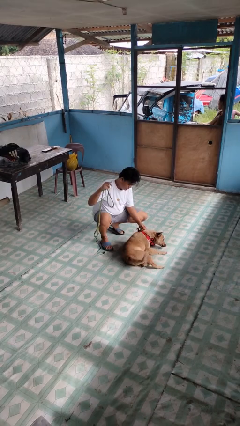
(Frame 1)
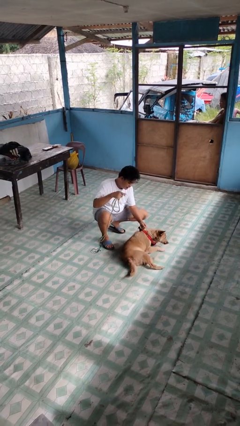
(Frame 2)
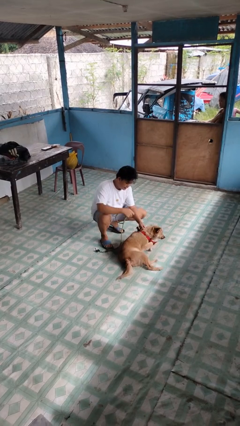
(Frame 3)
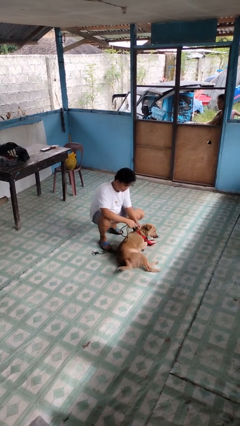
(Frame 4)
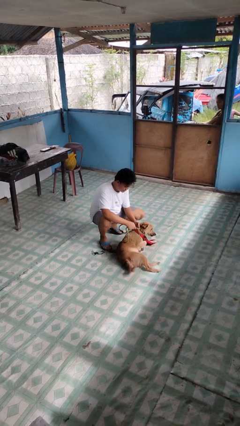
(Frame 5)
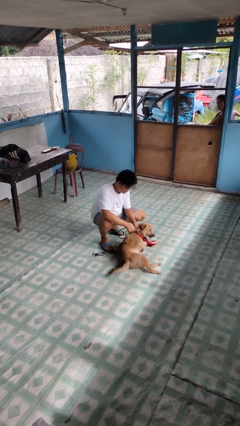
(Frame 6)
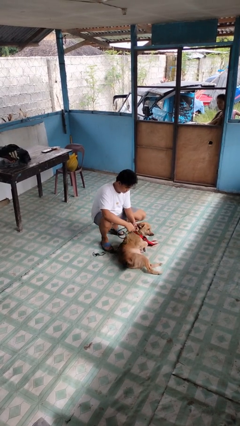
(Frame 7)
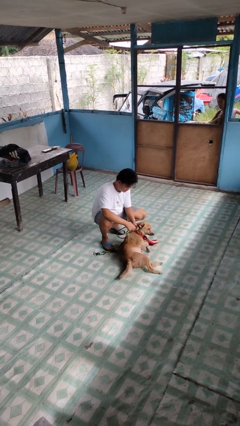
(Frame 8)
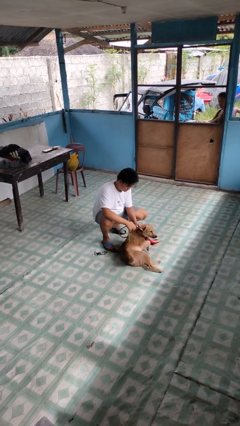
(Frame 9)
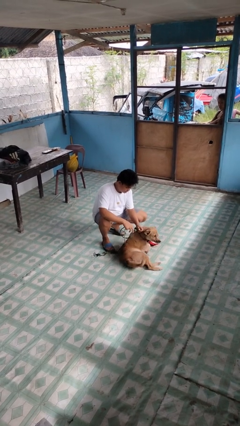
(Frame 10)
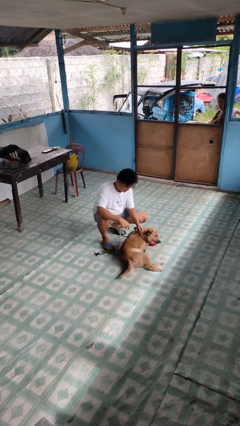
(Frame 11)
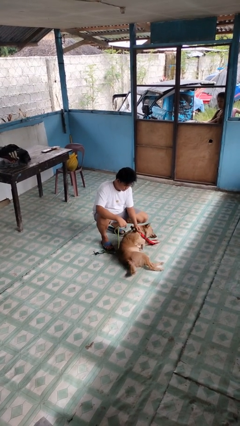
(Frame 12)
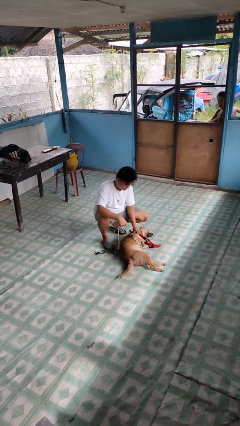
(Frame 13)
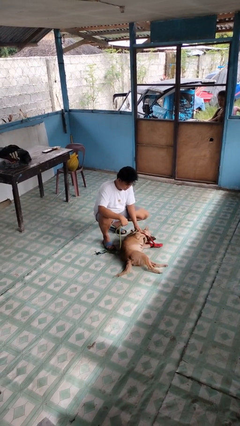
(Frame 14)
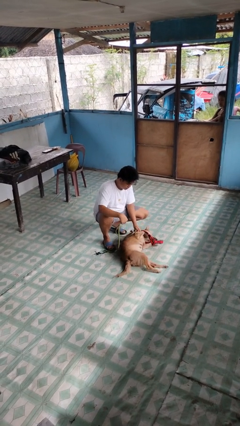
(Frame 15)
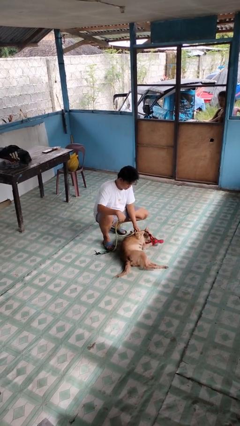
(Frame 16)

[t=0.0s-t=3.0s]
person attaches leash to dog

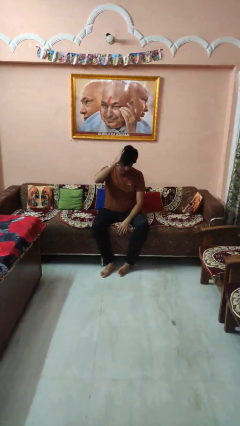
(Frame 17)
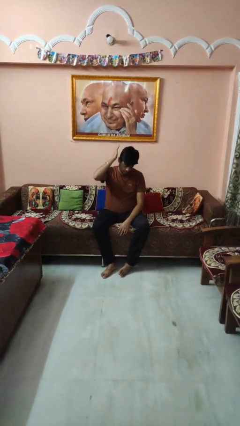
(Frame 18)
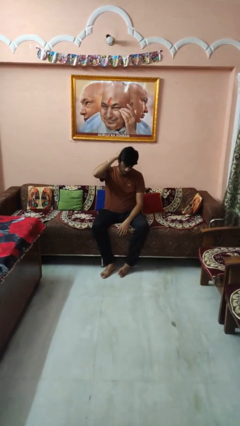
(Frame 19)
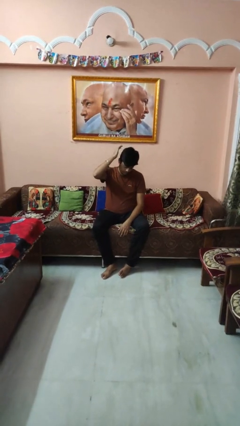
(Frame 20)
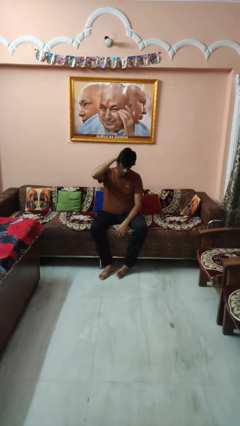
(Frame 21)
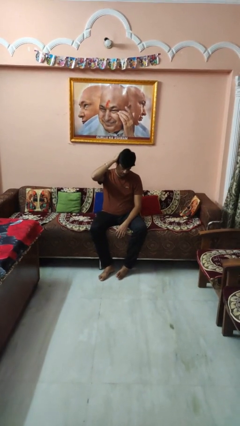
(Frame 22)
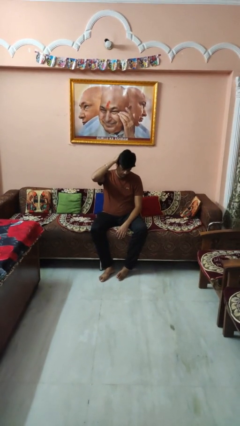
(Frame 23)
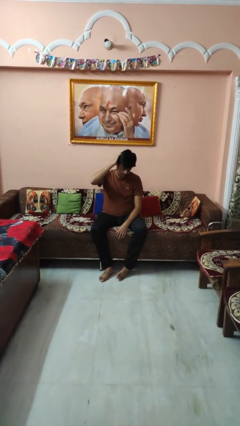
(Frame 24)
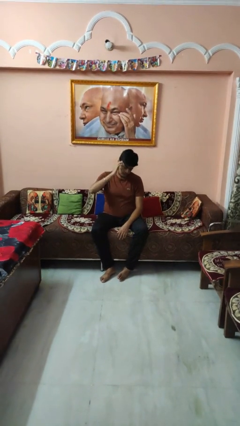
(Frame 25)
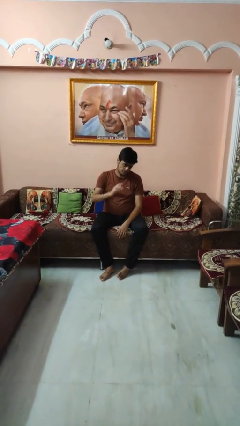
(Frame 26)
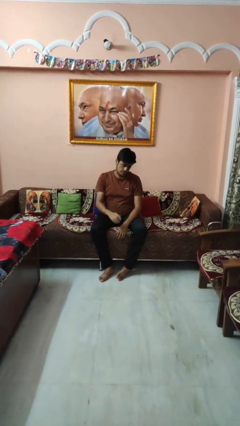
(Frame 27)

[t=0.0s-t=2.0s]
person pats head

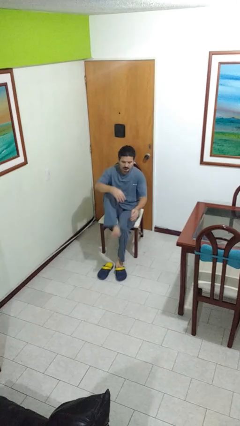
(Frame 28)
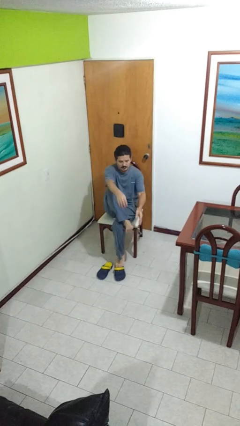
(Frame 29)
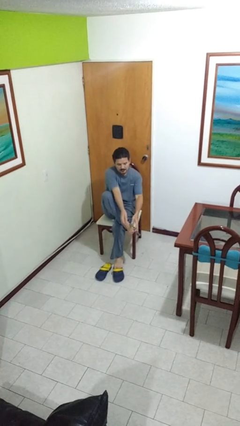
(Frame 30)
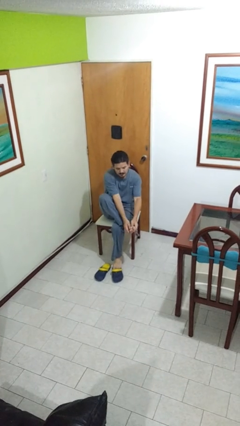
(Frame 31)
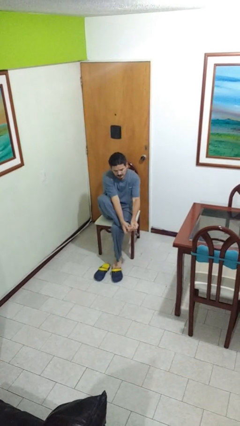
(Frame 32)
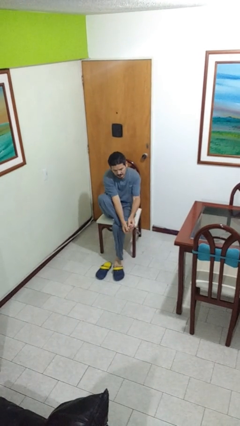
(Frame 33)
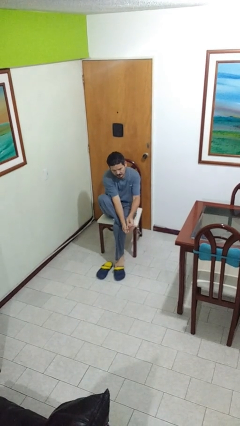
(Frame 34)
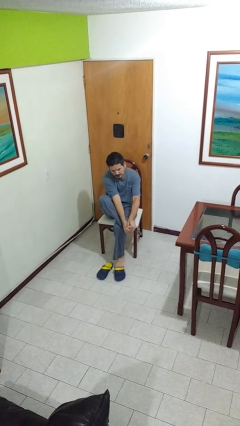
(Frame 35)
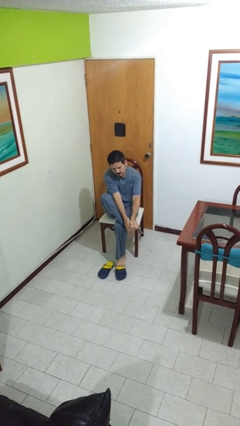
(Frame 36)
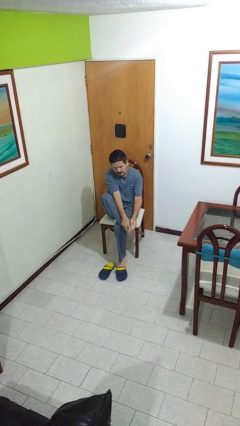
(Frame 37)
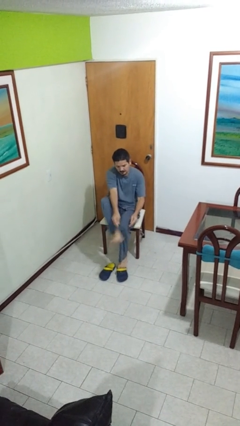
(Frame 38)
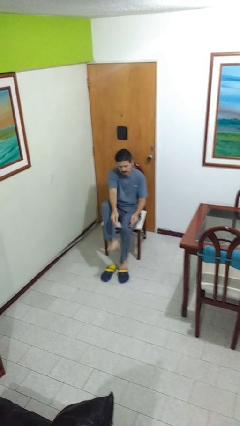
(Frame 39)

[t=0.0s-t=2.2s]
person rubs foot

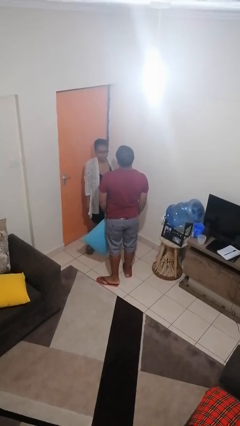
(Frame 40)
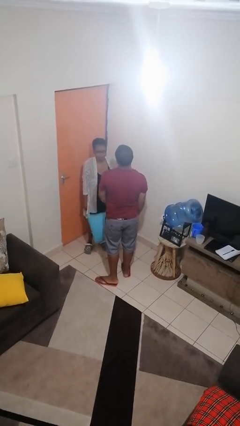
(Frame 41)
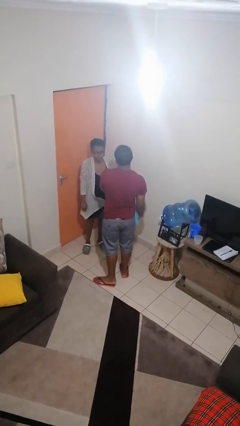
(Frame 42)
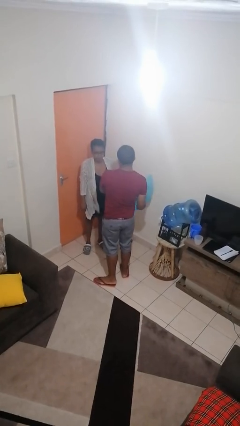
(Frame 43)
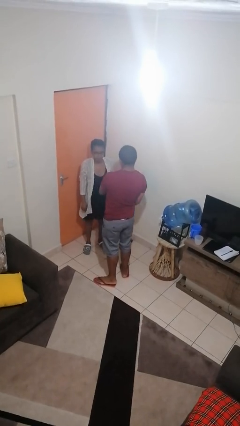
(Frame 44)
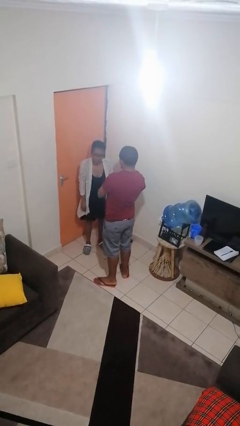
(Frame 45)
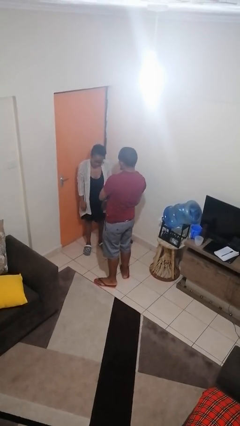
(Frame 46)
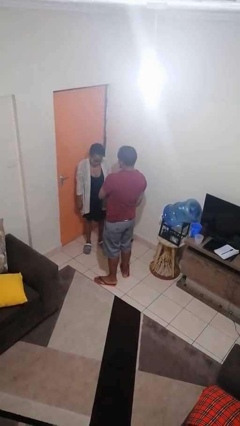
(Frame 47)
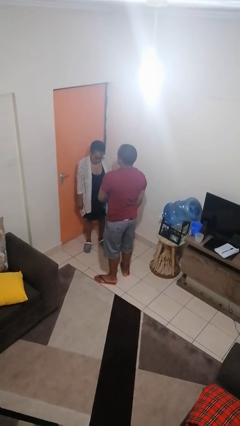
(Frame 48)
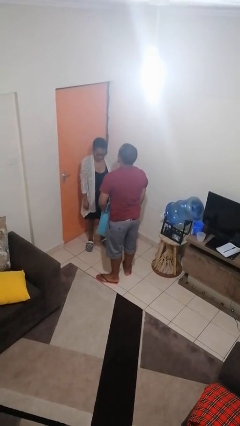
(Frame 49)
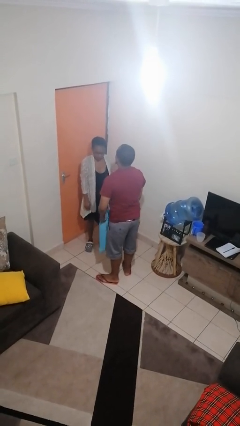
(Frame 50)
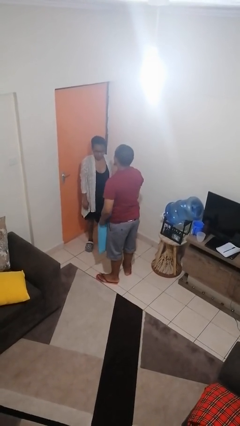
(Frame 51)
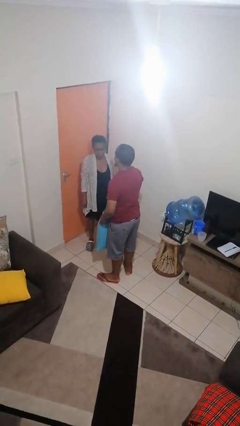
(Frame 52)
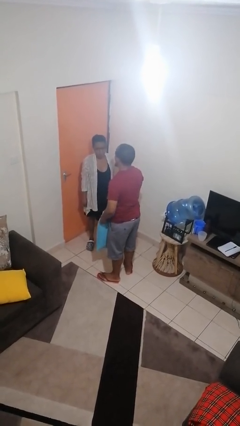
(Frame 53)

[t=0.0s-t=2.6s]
person hits person with pillow

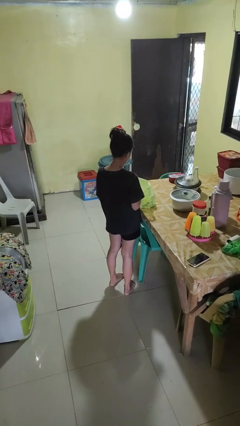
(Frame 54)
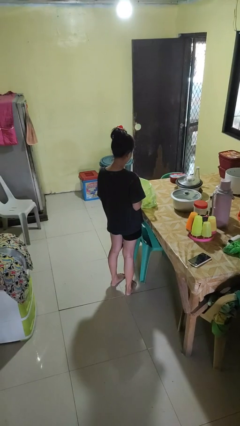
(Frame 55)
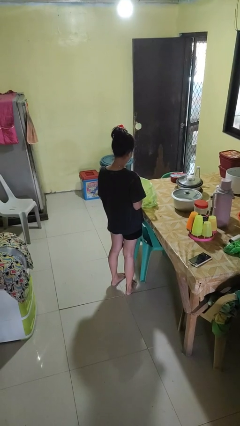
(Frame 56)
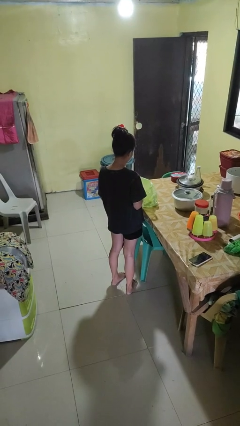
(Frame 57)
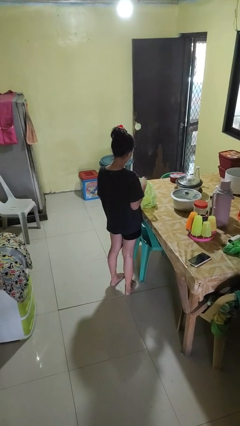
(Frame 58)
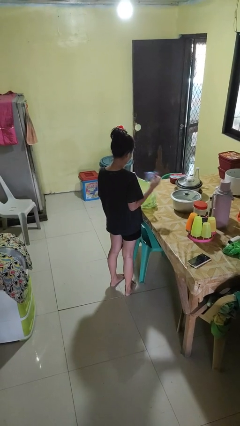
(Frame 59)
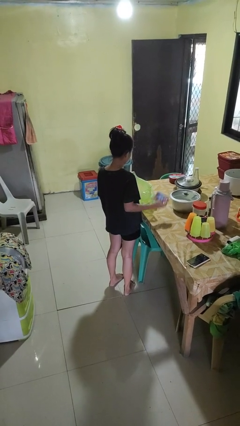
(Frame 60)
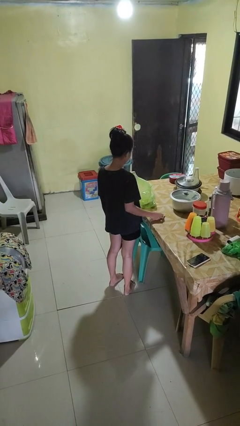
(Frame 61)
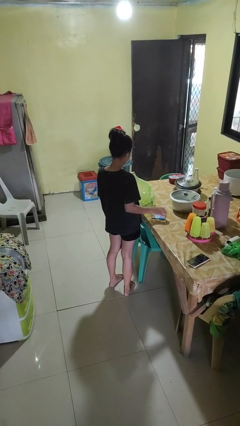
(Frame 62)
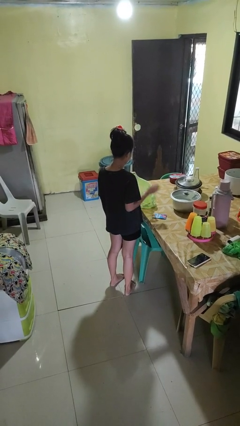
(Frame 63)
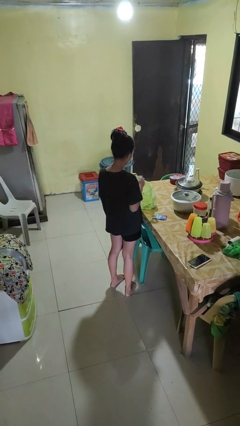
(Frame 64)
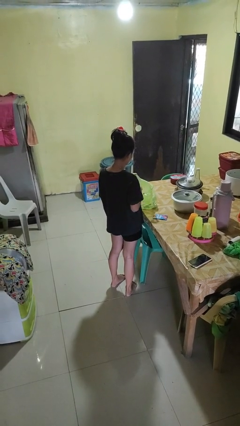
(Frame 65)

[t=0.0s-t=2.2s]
person takes object from bag

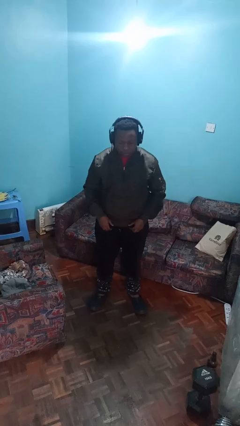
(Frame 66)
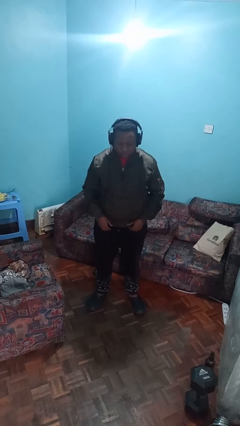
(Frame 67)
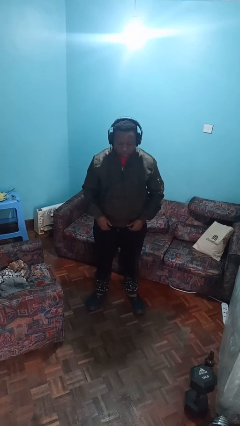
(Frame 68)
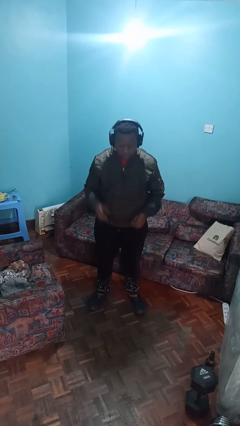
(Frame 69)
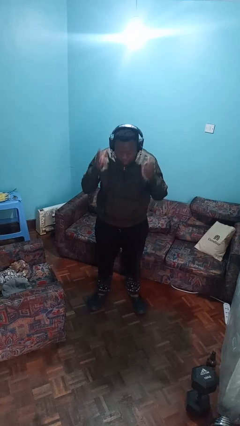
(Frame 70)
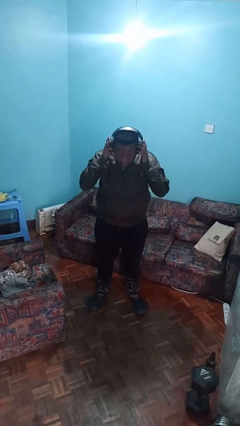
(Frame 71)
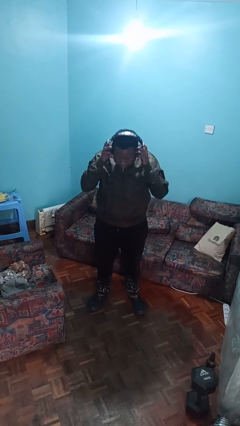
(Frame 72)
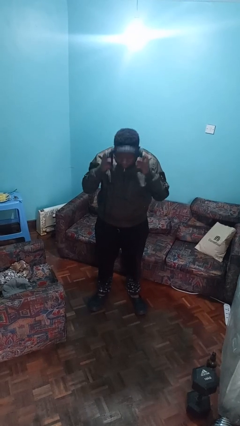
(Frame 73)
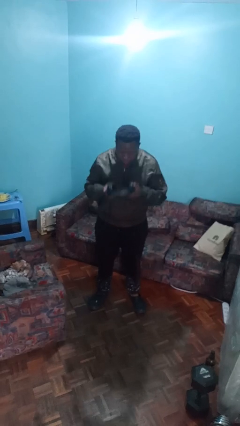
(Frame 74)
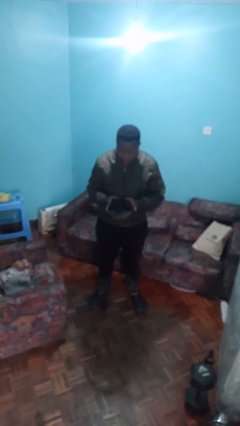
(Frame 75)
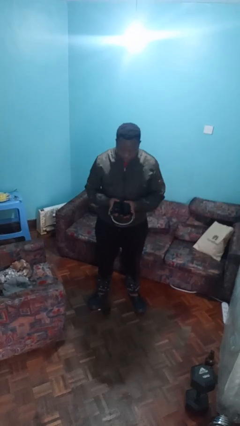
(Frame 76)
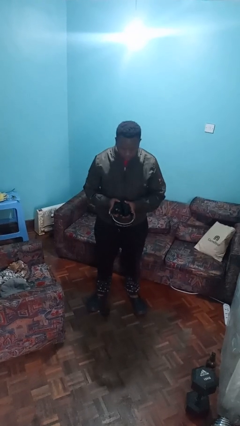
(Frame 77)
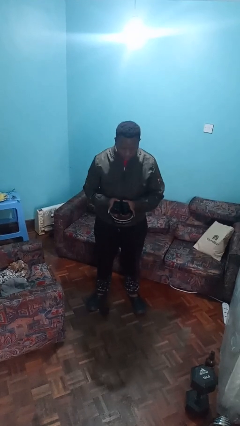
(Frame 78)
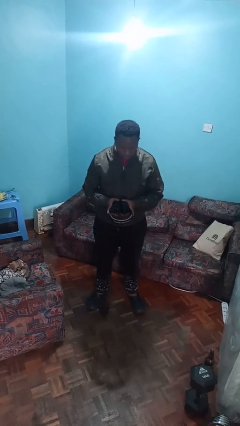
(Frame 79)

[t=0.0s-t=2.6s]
person takes off headphones

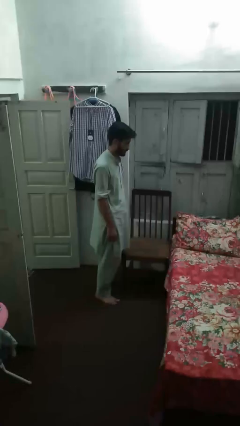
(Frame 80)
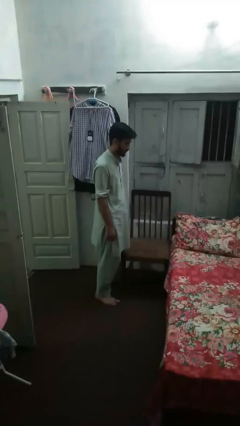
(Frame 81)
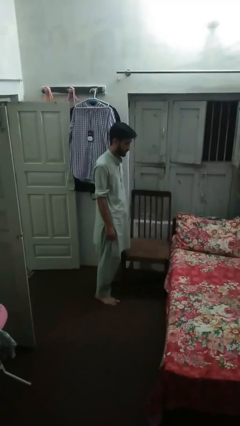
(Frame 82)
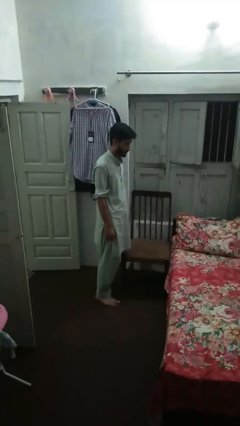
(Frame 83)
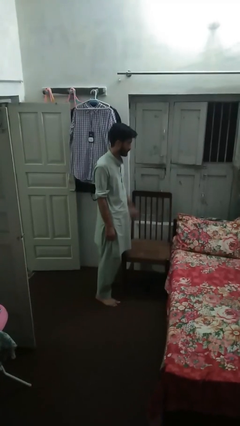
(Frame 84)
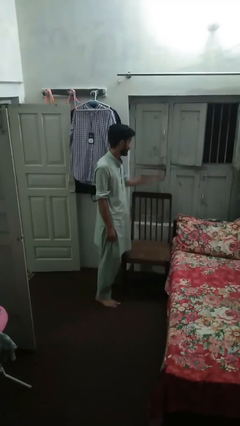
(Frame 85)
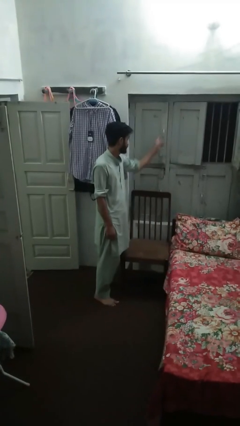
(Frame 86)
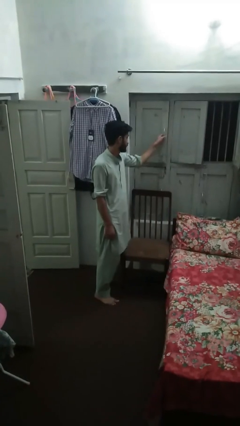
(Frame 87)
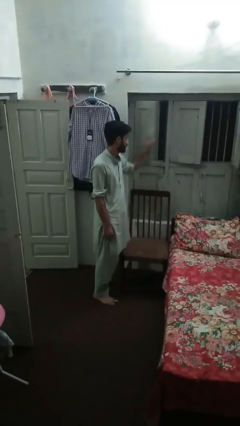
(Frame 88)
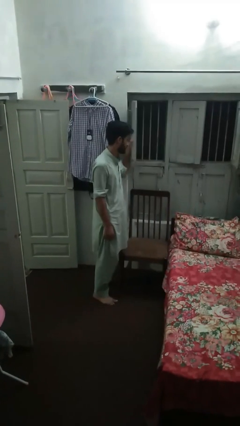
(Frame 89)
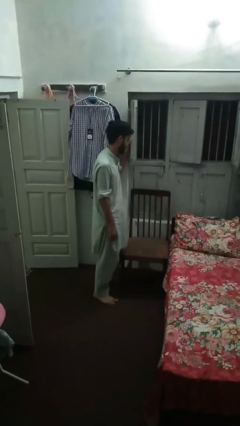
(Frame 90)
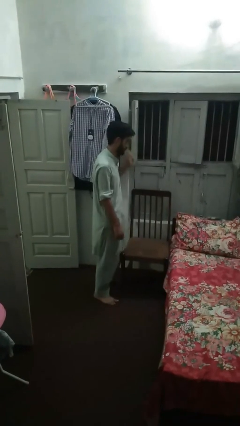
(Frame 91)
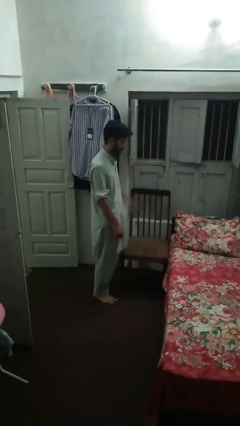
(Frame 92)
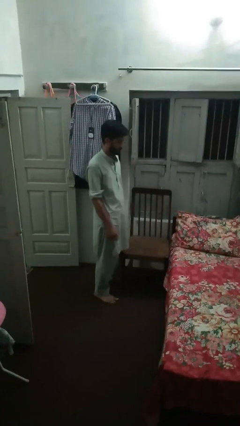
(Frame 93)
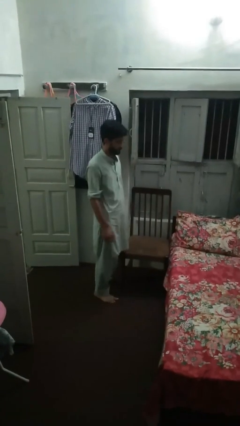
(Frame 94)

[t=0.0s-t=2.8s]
person opens home window
